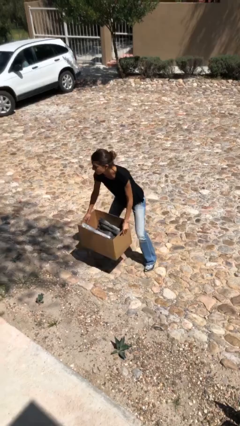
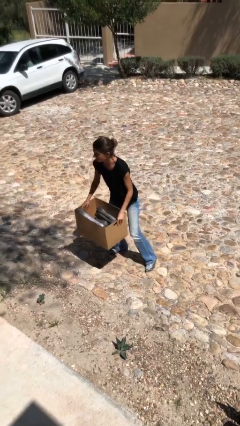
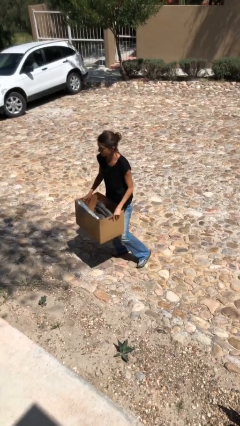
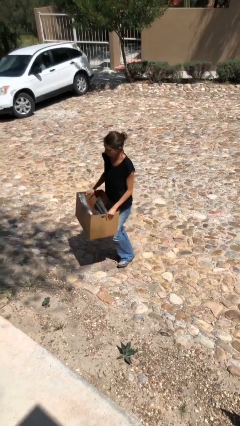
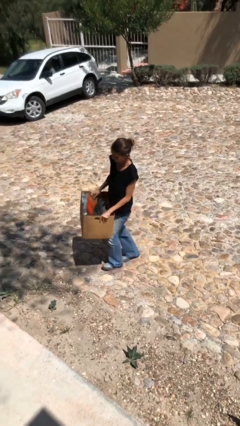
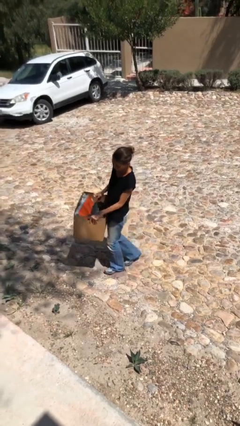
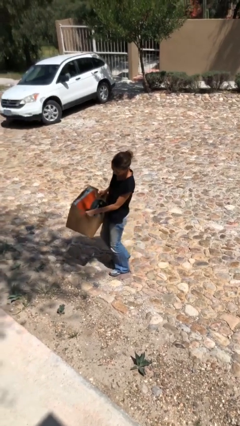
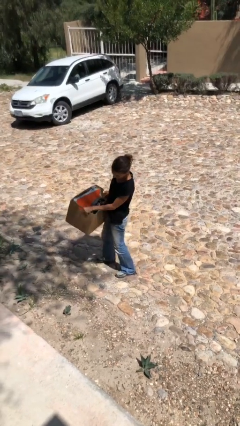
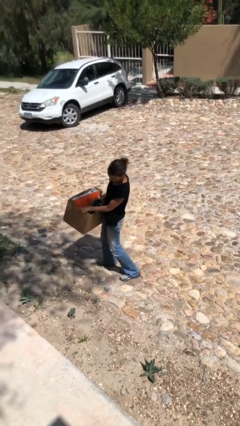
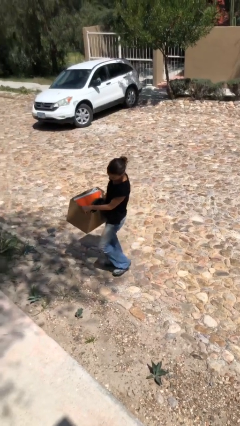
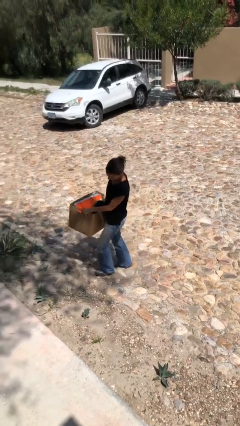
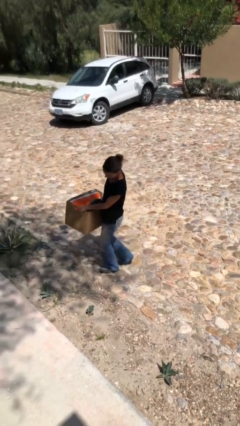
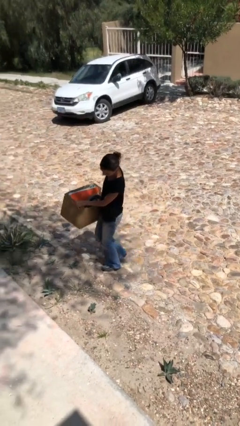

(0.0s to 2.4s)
person carries heavy object

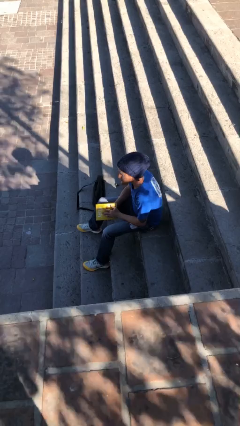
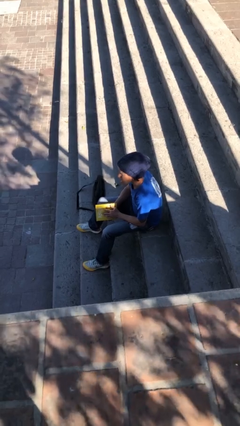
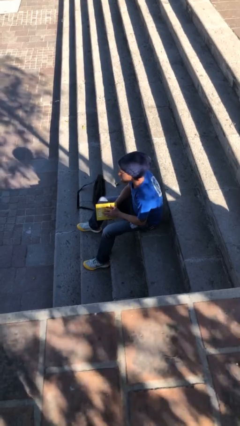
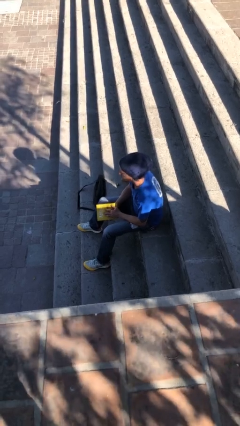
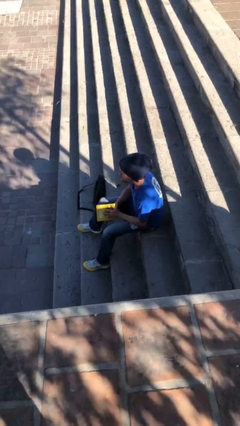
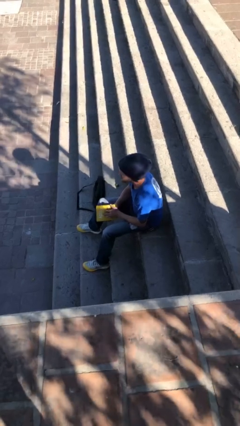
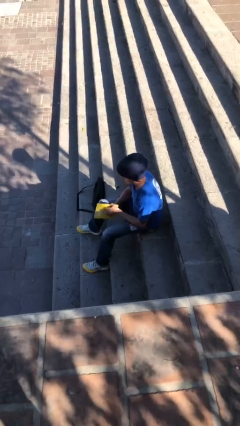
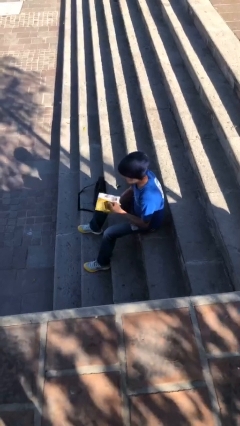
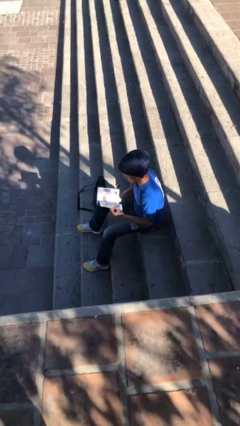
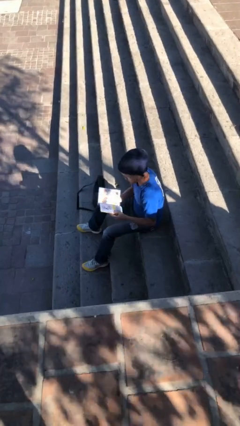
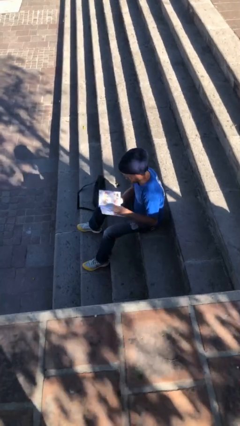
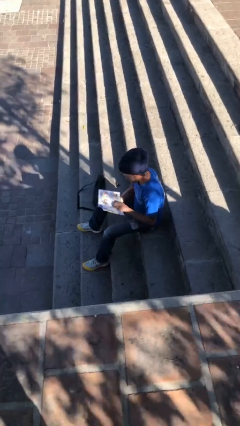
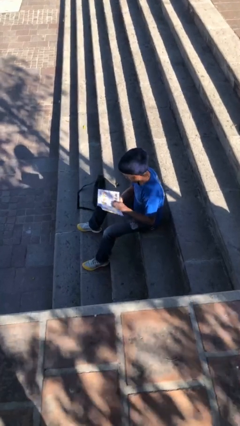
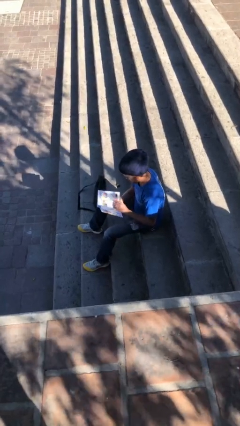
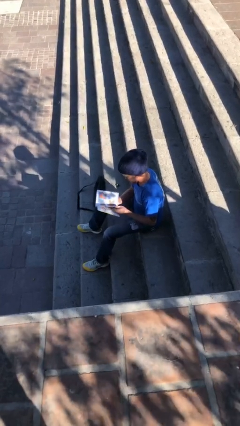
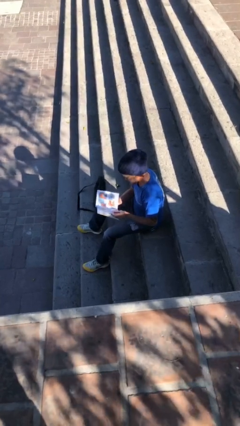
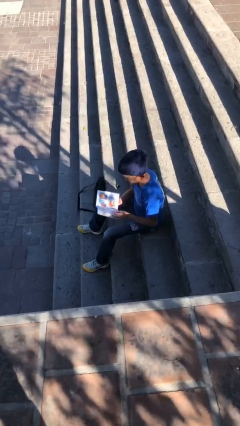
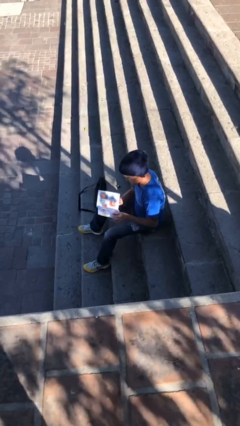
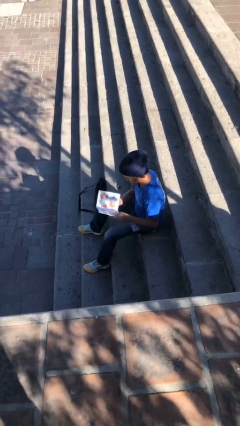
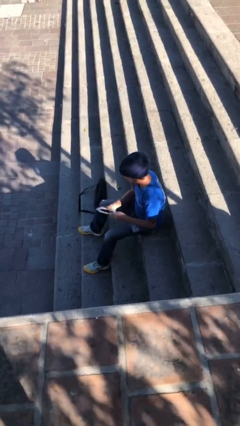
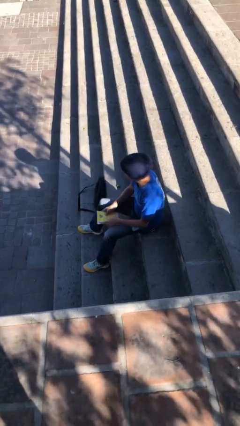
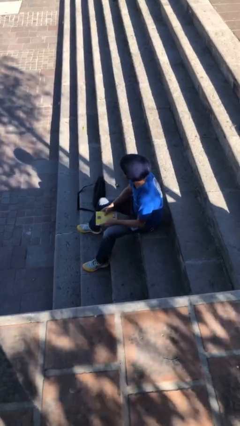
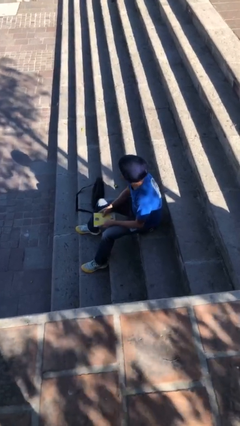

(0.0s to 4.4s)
person reads document

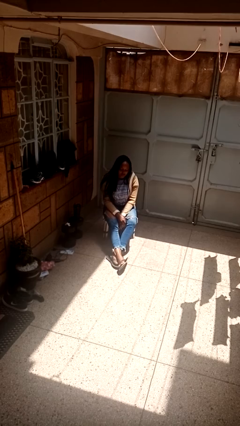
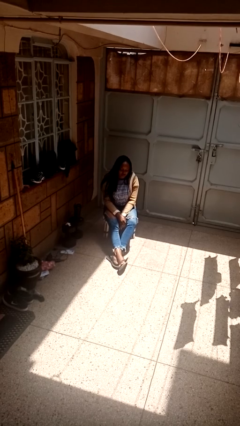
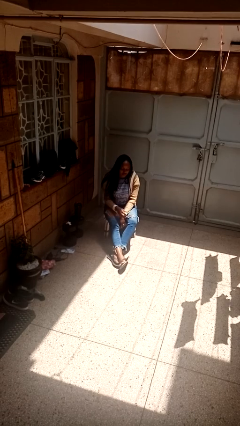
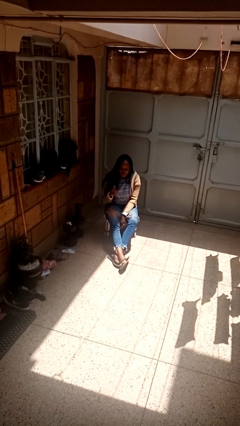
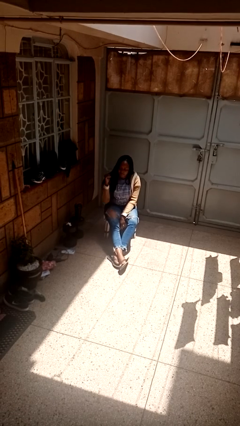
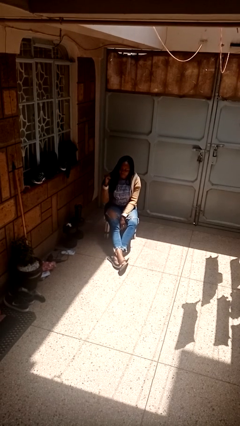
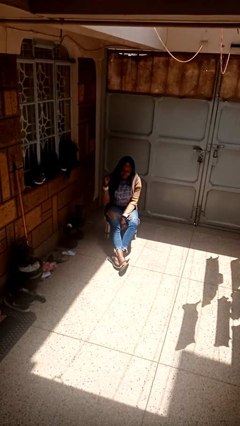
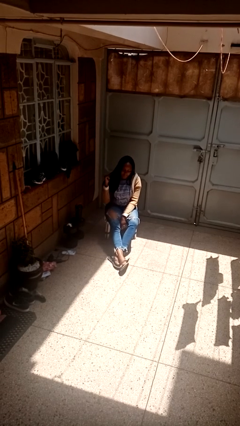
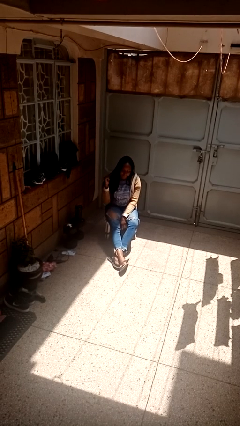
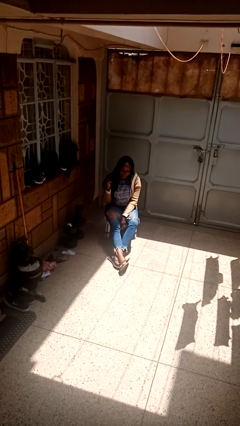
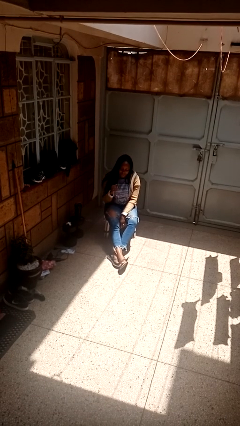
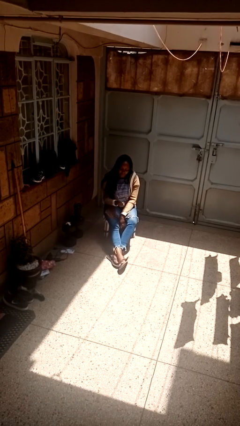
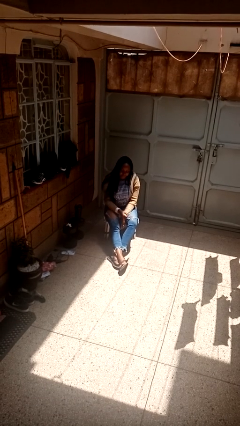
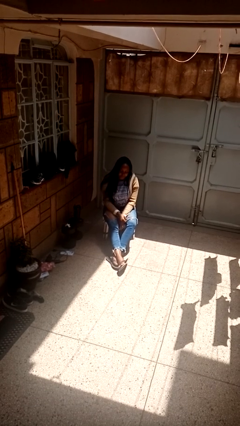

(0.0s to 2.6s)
person gestures behind me

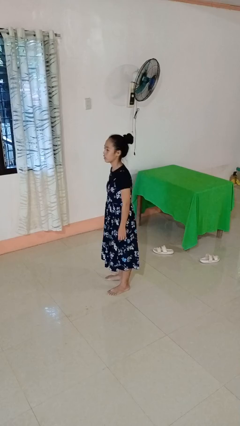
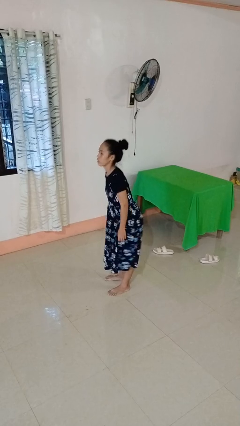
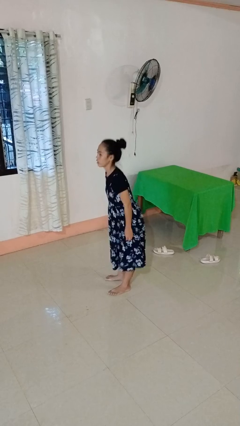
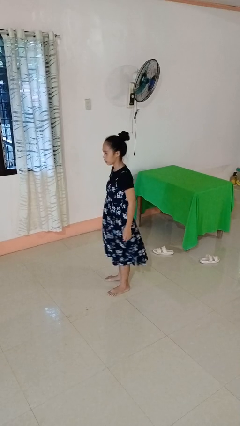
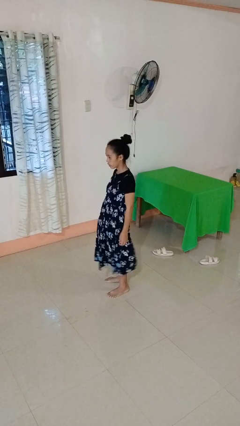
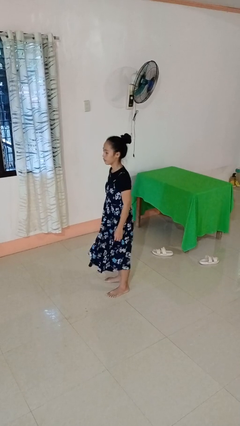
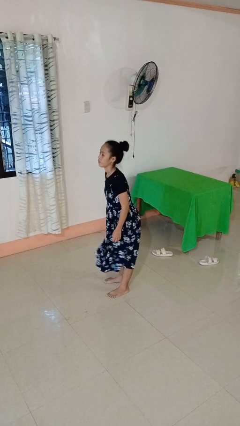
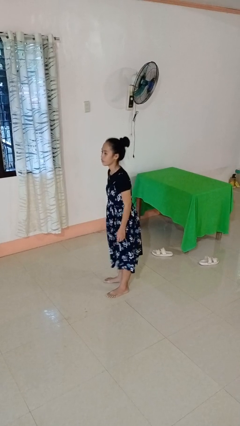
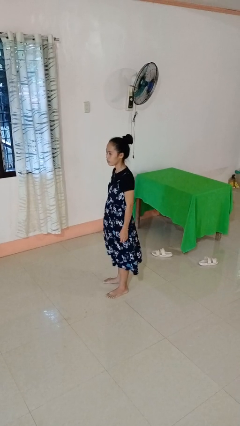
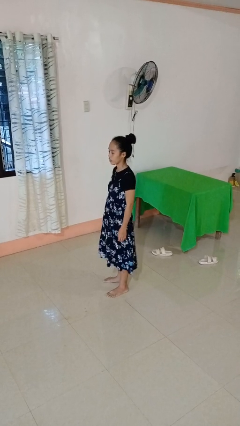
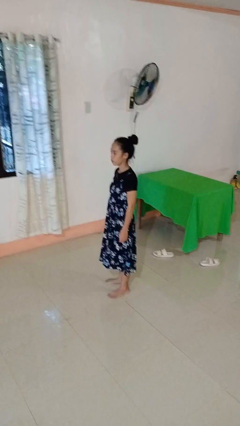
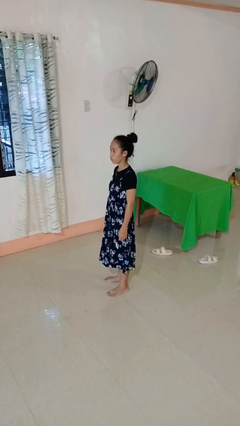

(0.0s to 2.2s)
person wiggles hips

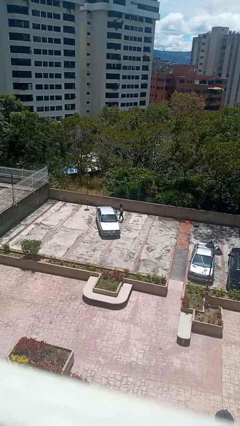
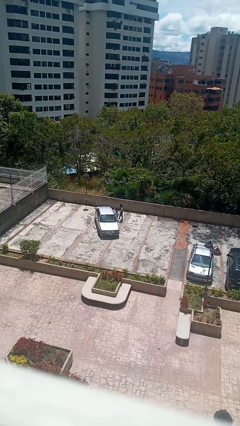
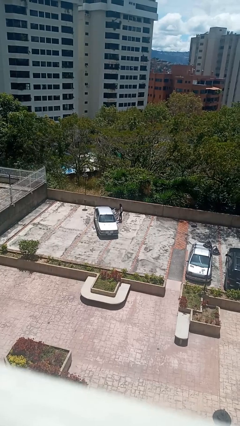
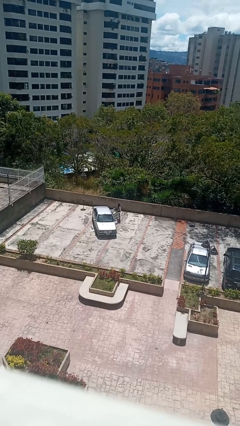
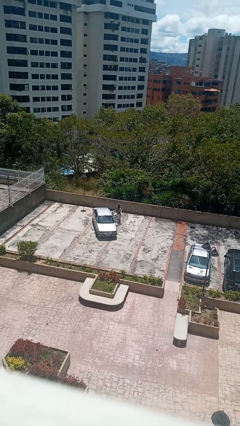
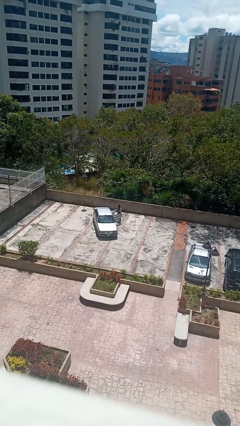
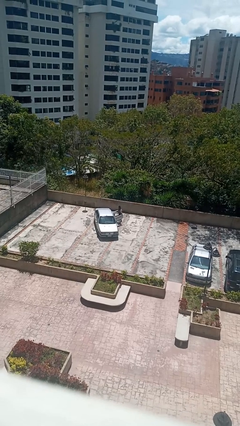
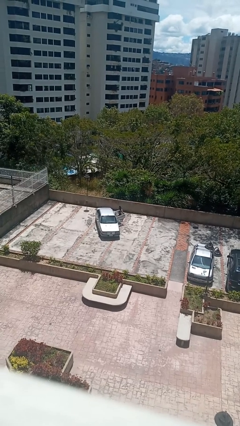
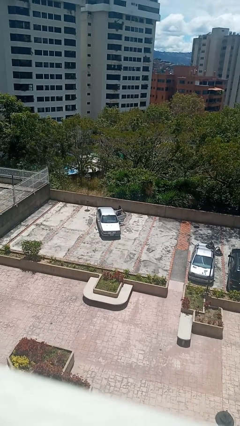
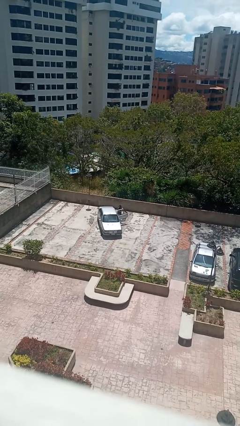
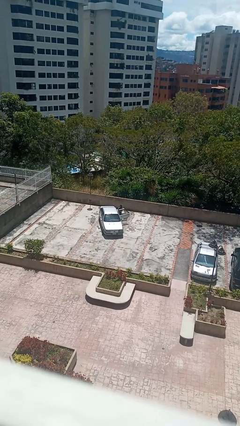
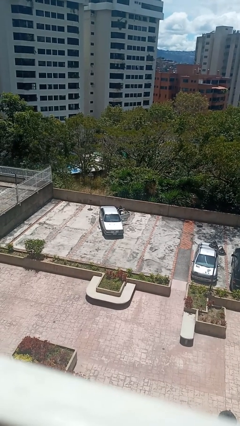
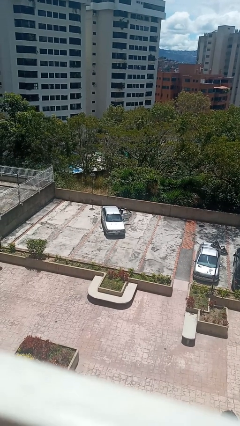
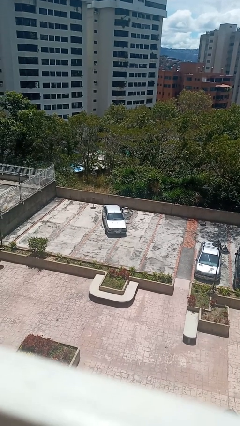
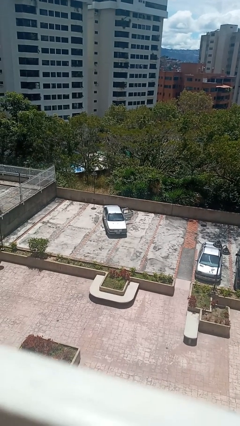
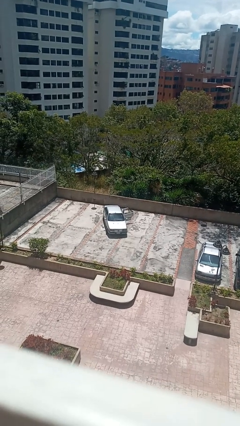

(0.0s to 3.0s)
car picks up person

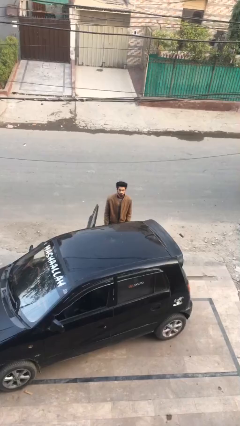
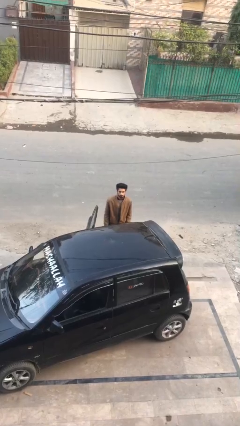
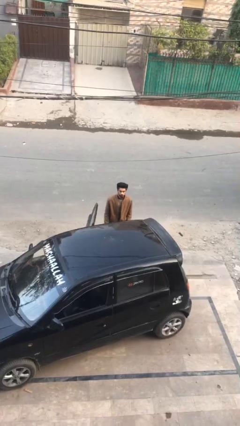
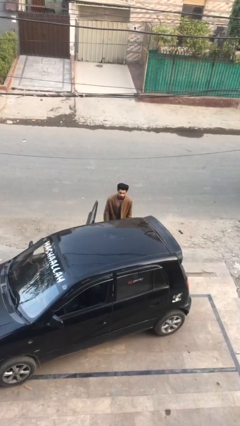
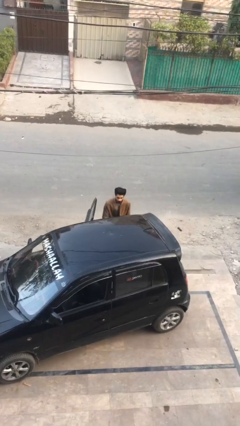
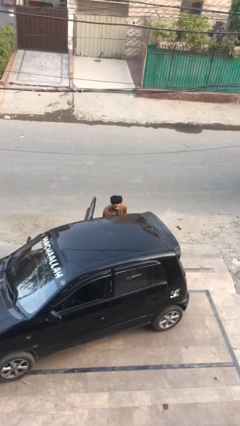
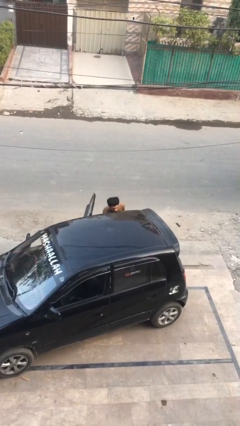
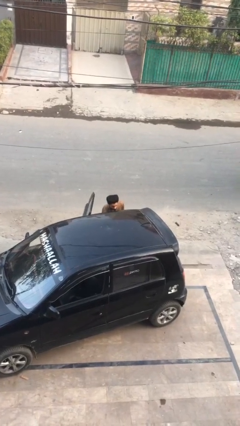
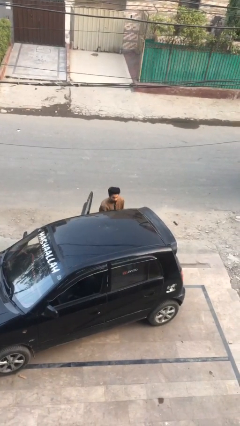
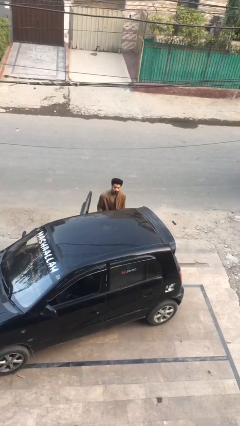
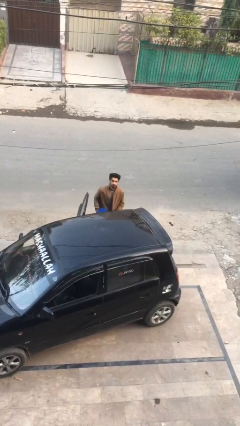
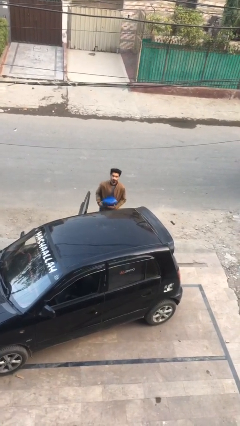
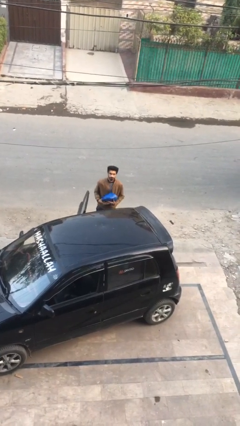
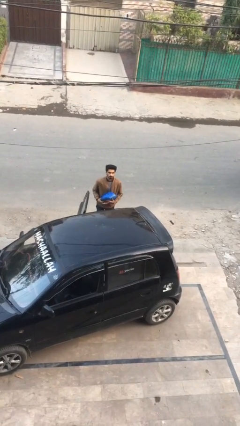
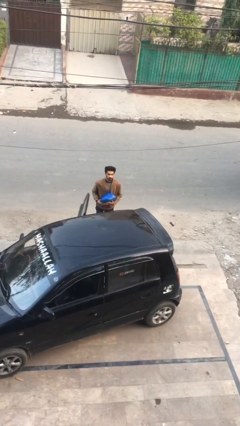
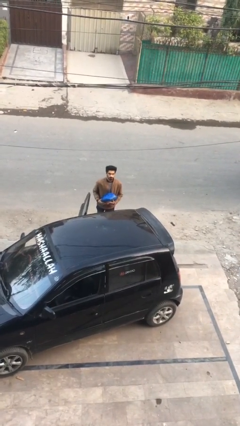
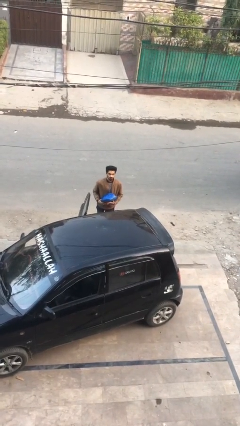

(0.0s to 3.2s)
person unloads car
